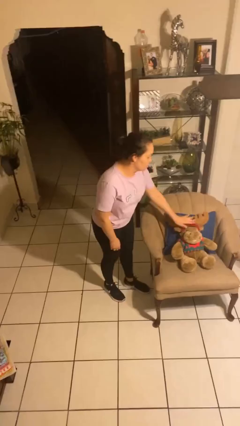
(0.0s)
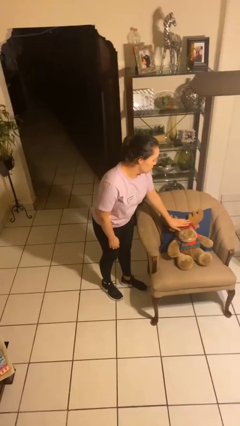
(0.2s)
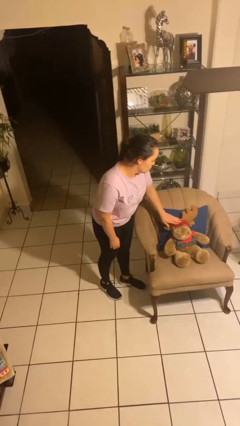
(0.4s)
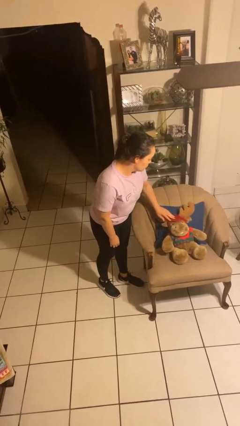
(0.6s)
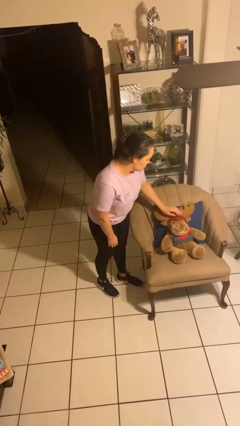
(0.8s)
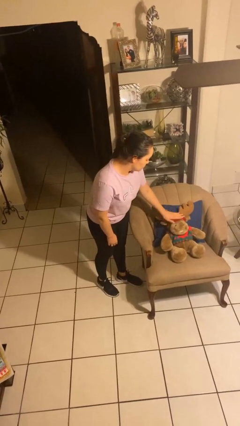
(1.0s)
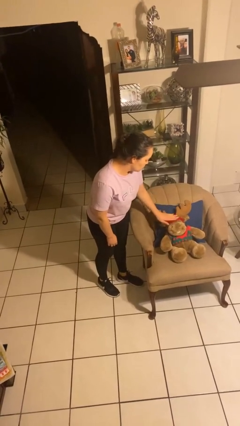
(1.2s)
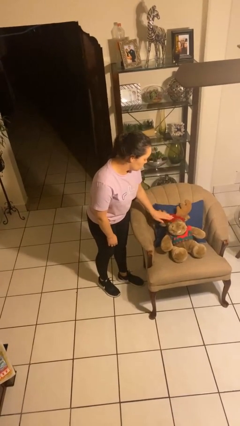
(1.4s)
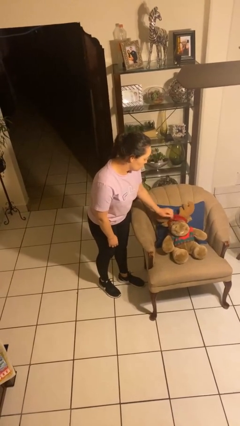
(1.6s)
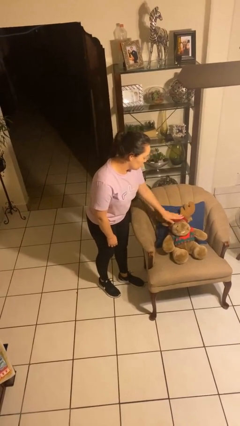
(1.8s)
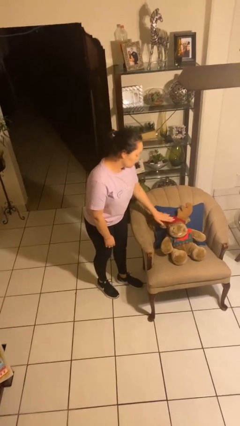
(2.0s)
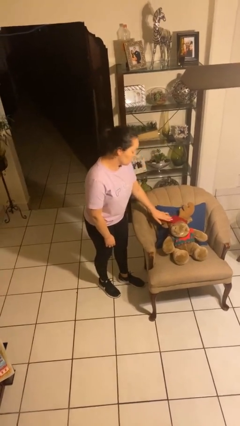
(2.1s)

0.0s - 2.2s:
person waves hand over object

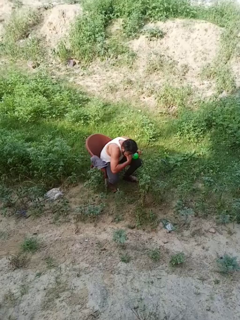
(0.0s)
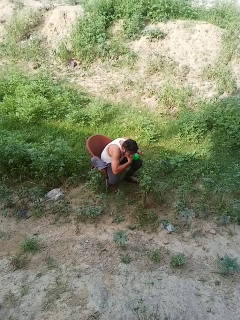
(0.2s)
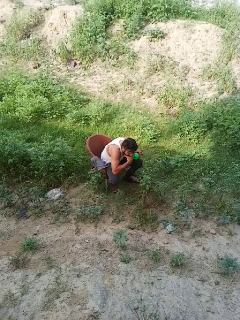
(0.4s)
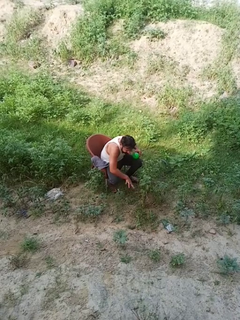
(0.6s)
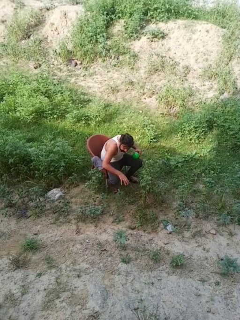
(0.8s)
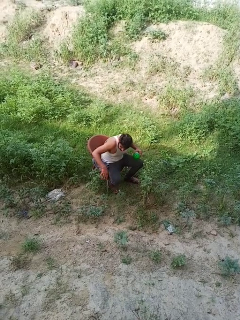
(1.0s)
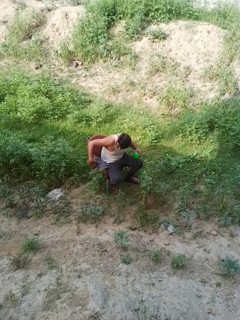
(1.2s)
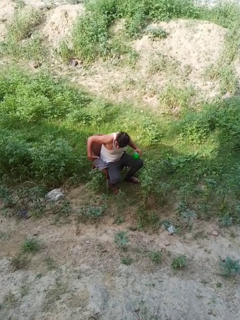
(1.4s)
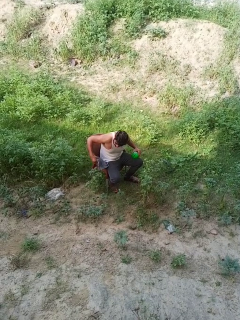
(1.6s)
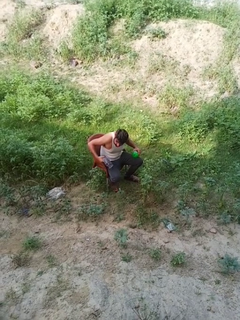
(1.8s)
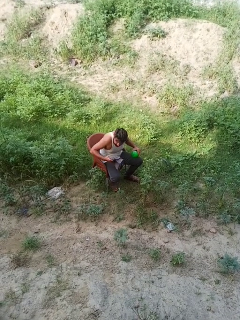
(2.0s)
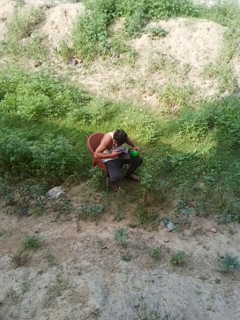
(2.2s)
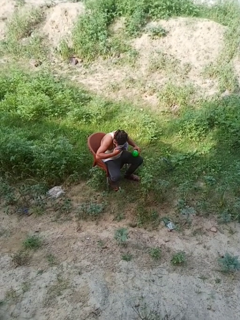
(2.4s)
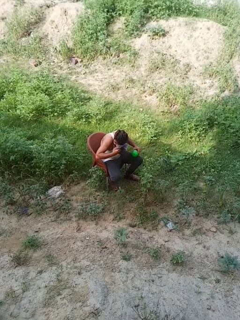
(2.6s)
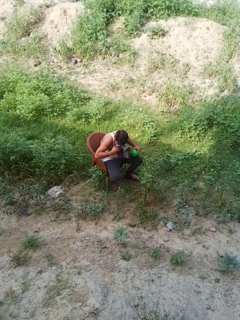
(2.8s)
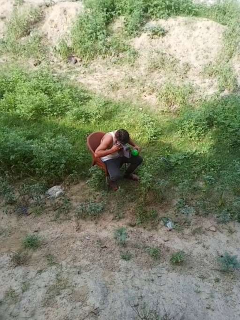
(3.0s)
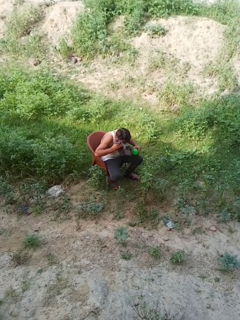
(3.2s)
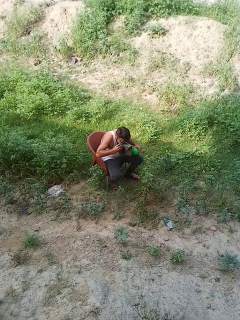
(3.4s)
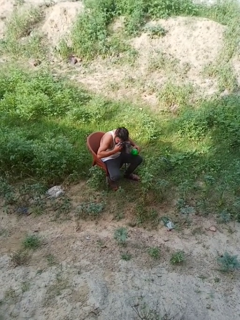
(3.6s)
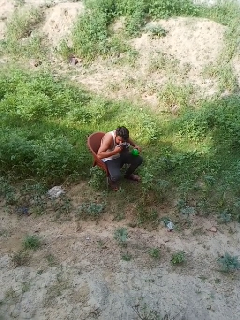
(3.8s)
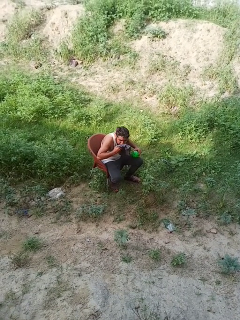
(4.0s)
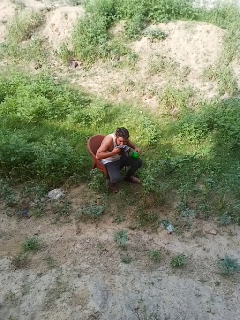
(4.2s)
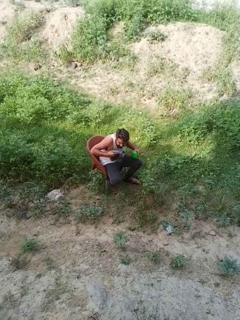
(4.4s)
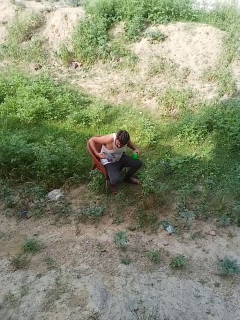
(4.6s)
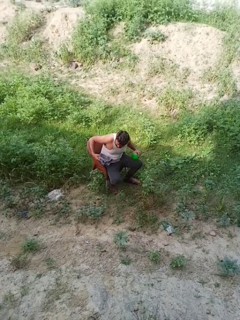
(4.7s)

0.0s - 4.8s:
person dries face with towel

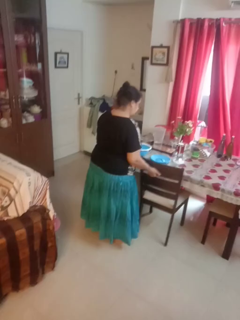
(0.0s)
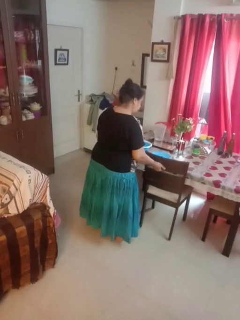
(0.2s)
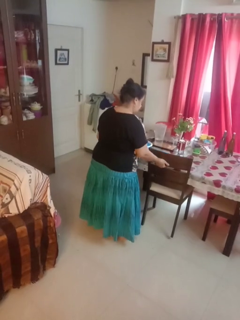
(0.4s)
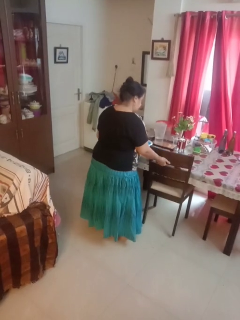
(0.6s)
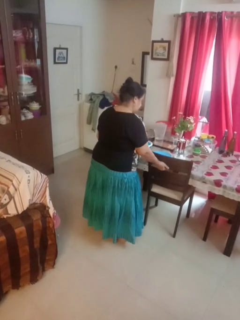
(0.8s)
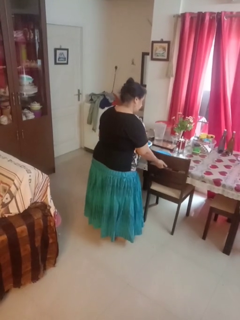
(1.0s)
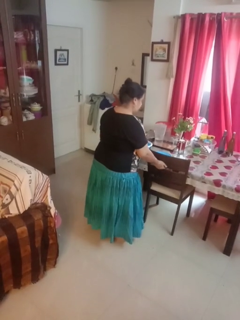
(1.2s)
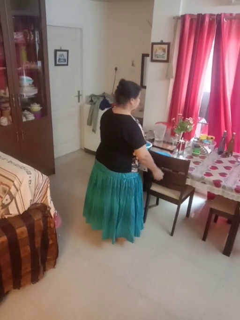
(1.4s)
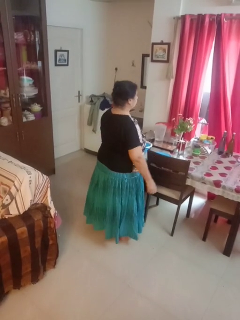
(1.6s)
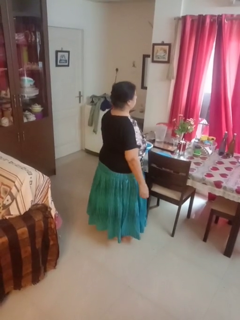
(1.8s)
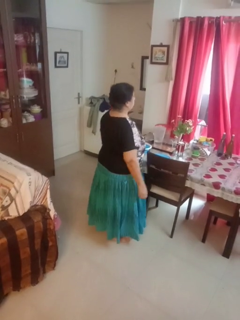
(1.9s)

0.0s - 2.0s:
person pushes in chair

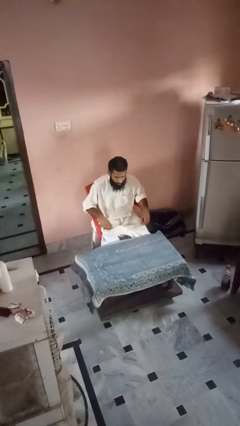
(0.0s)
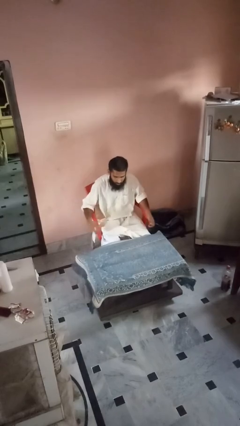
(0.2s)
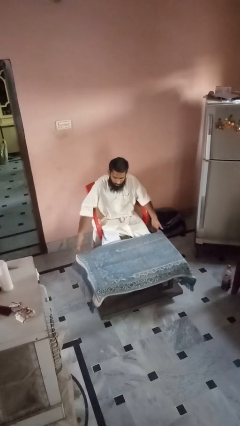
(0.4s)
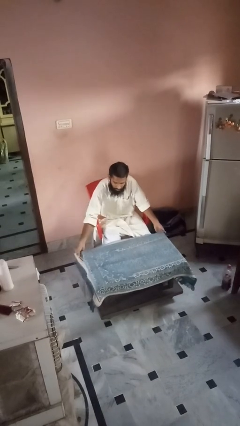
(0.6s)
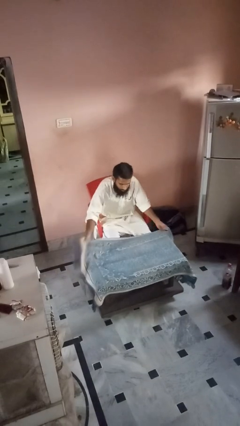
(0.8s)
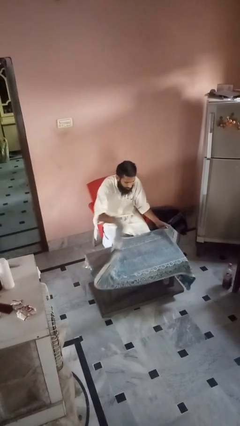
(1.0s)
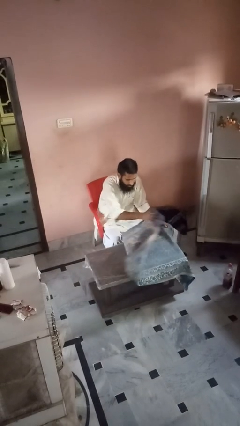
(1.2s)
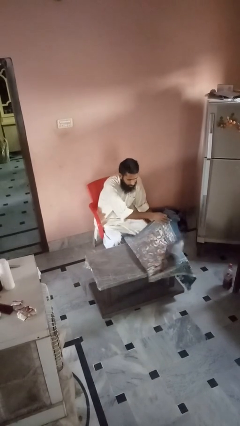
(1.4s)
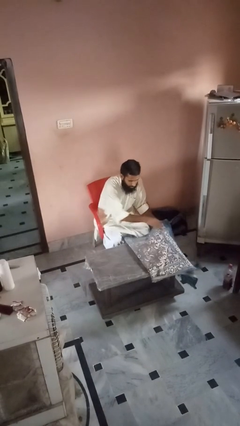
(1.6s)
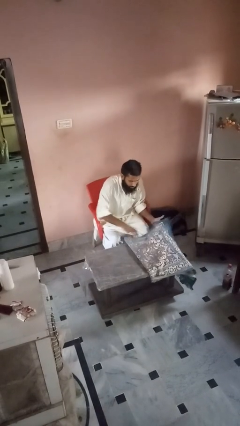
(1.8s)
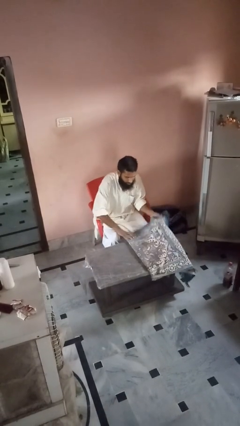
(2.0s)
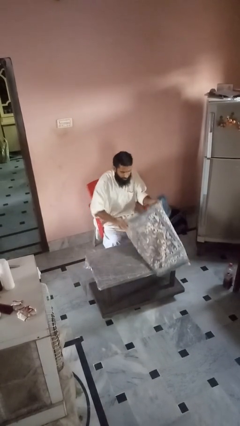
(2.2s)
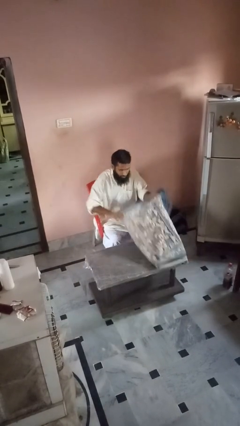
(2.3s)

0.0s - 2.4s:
person folds tablecloth

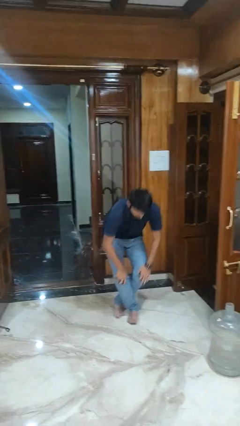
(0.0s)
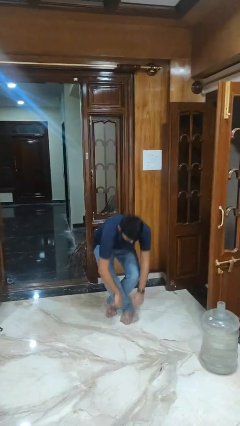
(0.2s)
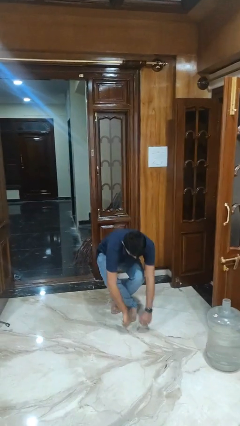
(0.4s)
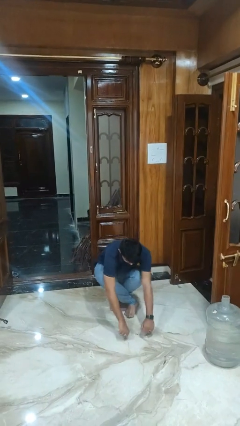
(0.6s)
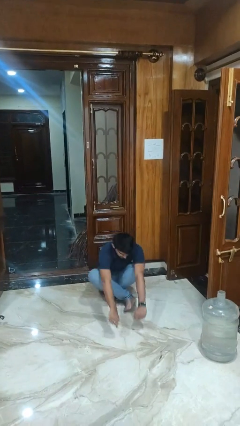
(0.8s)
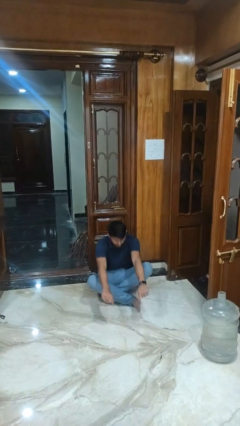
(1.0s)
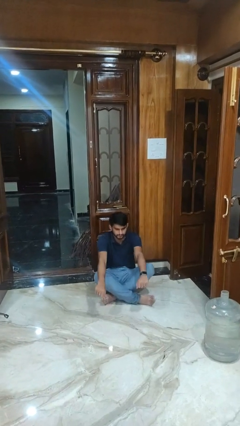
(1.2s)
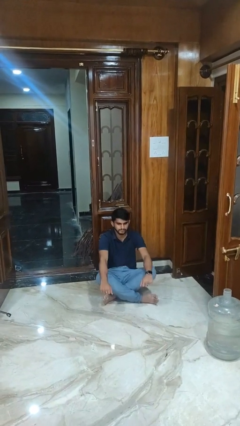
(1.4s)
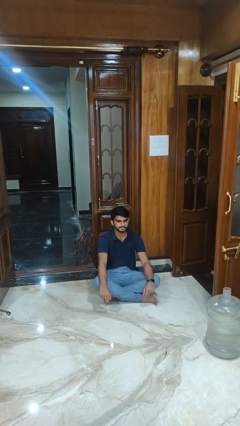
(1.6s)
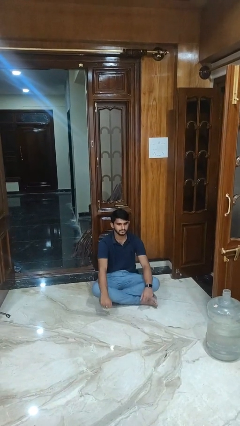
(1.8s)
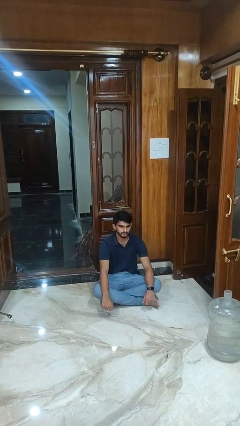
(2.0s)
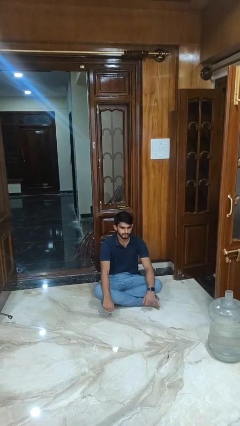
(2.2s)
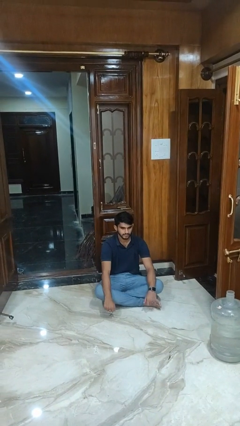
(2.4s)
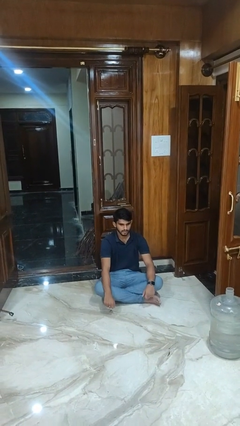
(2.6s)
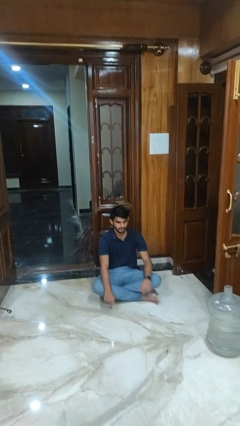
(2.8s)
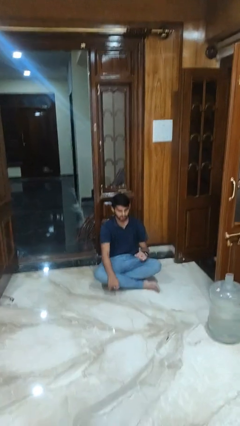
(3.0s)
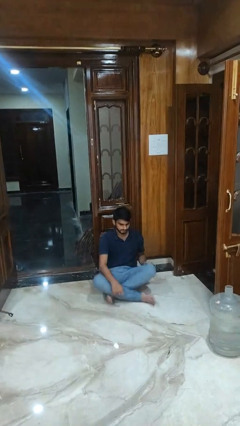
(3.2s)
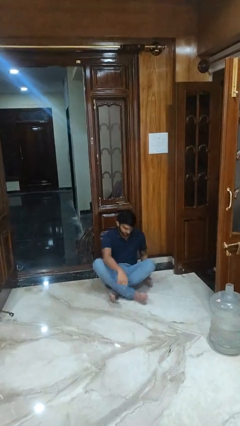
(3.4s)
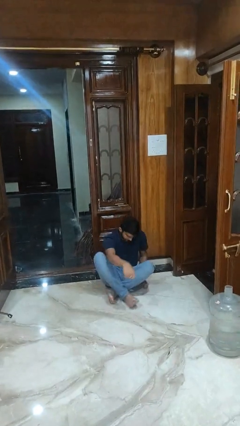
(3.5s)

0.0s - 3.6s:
person sits crisscross

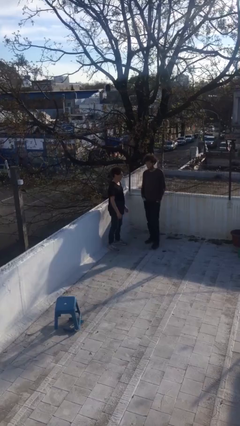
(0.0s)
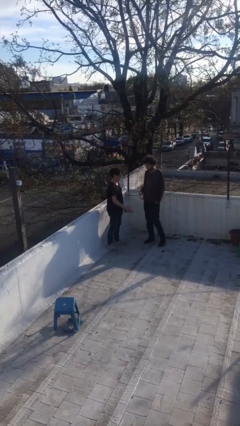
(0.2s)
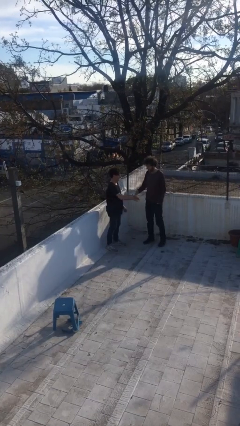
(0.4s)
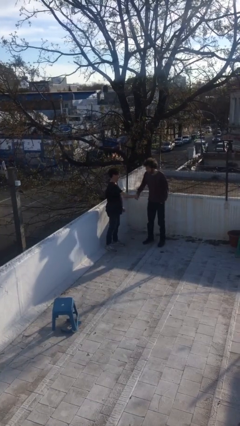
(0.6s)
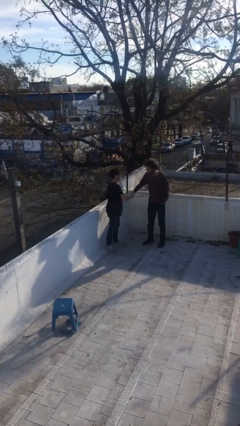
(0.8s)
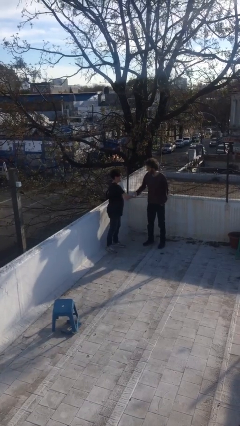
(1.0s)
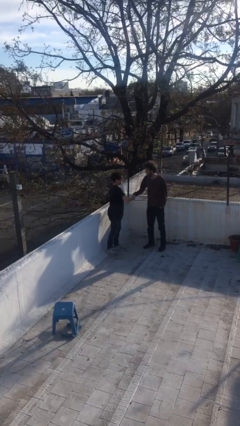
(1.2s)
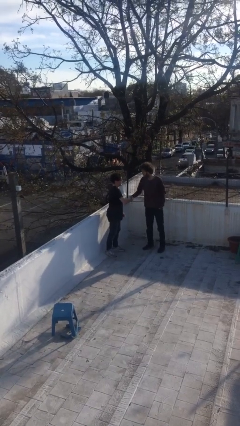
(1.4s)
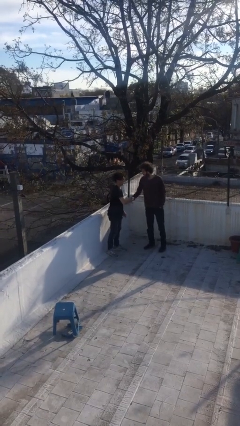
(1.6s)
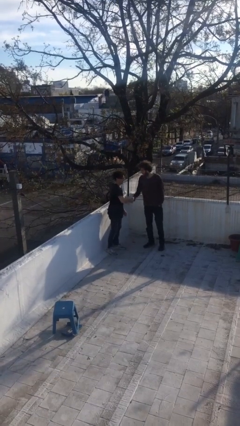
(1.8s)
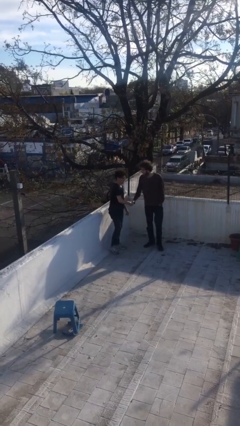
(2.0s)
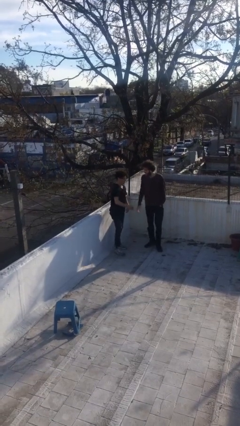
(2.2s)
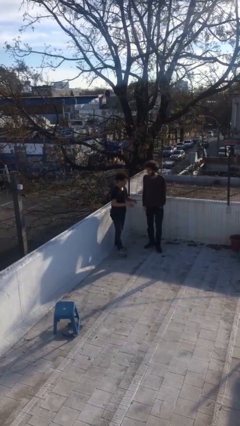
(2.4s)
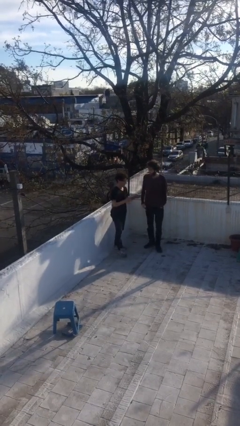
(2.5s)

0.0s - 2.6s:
person shakes hand

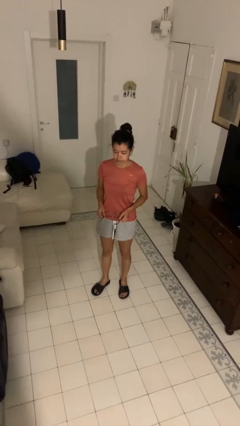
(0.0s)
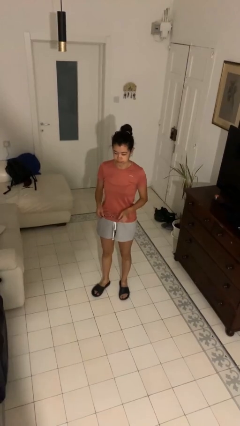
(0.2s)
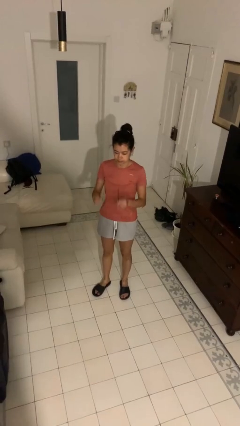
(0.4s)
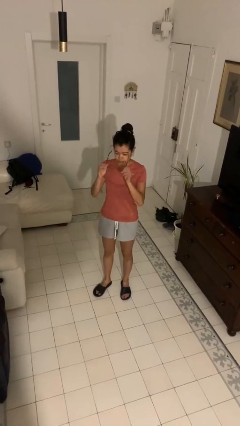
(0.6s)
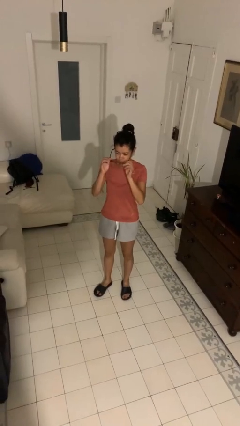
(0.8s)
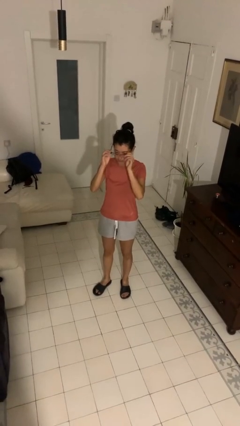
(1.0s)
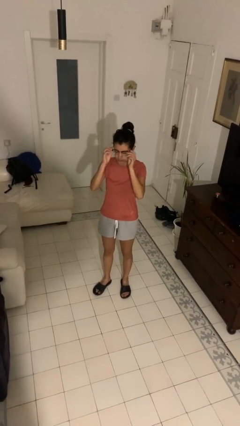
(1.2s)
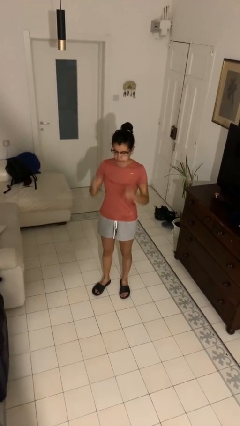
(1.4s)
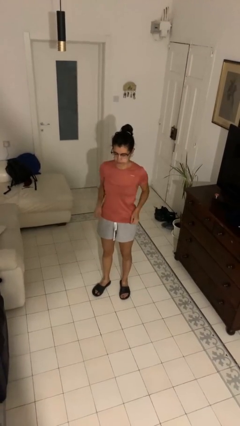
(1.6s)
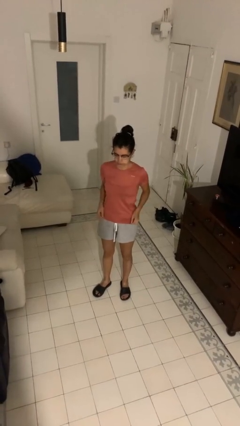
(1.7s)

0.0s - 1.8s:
person puts on glasses
